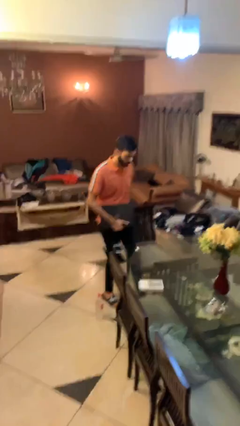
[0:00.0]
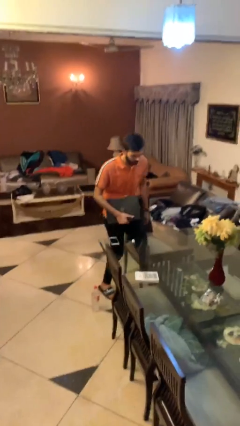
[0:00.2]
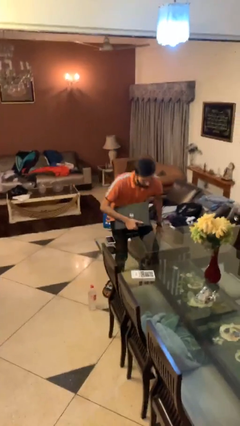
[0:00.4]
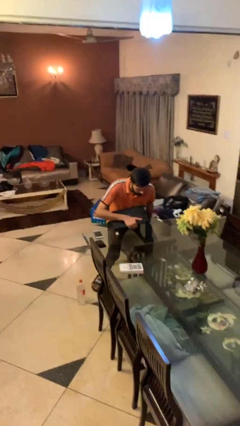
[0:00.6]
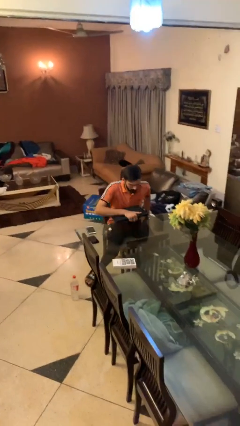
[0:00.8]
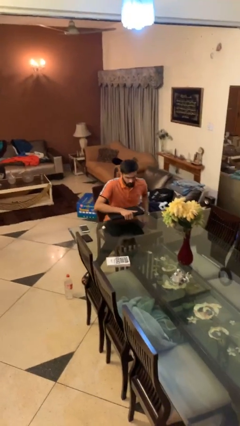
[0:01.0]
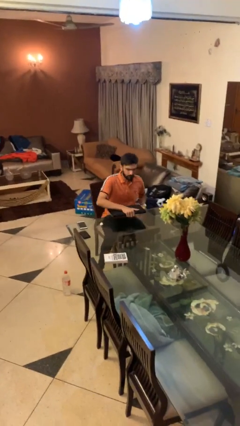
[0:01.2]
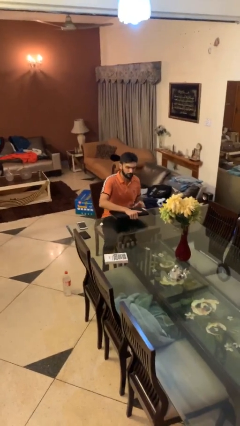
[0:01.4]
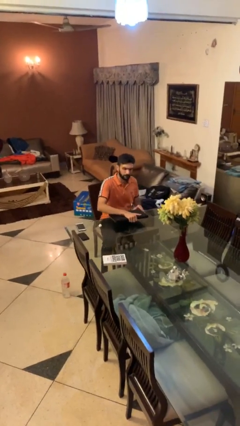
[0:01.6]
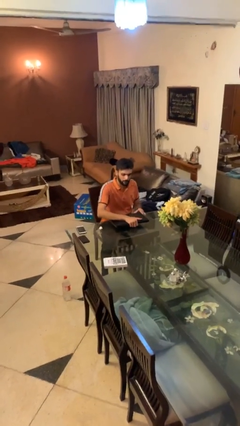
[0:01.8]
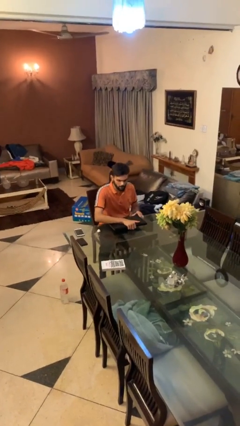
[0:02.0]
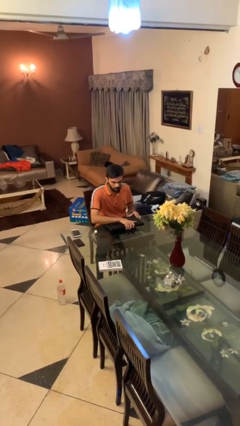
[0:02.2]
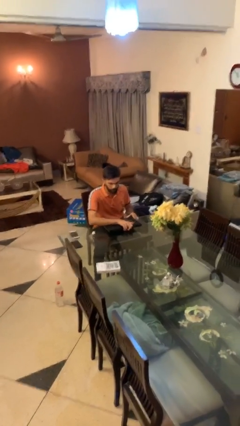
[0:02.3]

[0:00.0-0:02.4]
person sits down

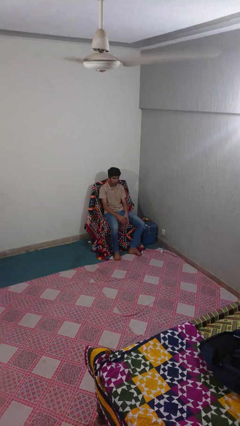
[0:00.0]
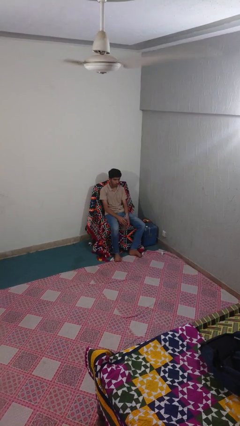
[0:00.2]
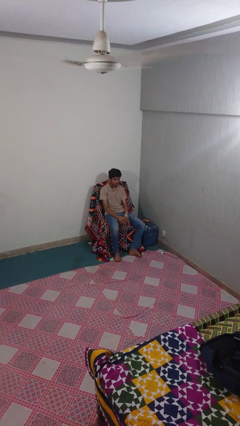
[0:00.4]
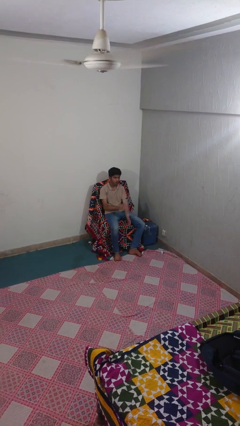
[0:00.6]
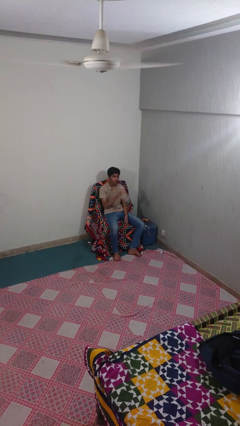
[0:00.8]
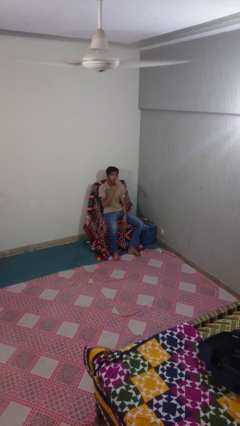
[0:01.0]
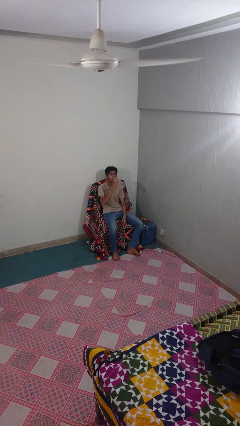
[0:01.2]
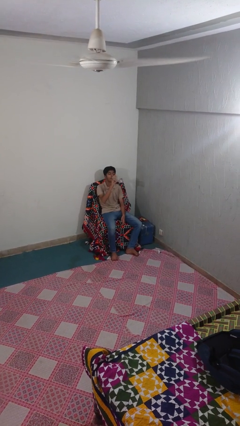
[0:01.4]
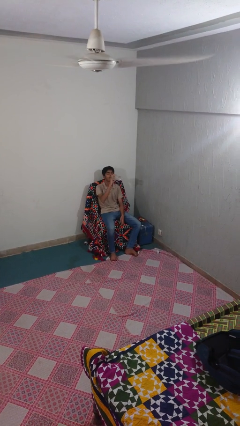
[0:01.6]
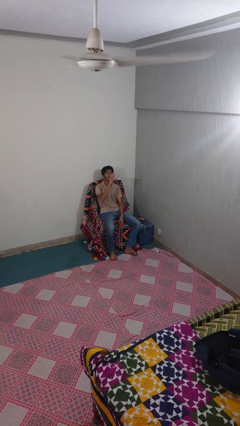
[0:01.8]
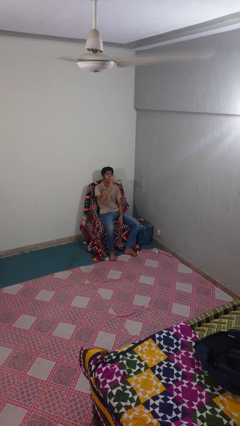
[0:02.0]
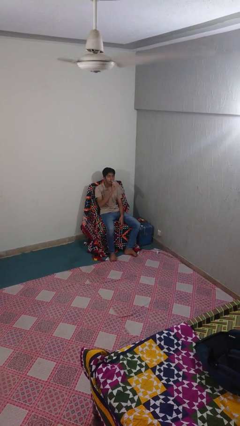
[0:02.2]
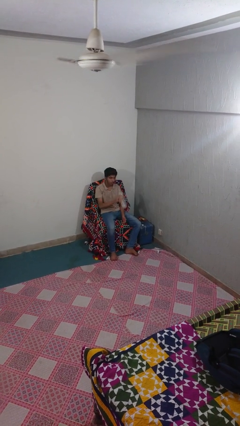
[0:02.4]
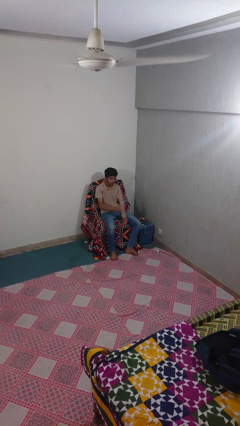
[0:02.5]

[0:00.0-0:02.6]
person drinks from bottle

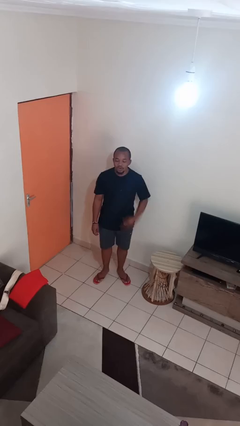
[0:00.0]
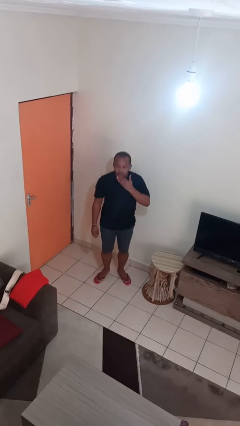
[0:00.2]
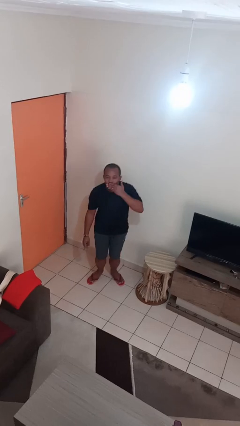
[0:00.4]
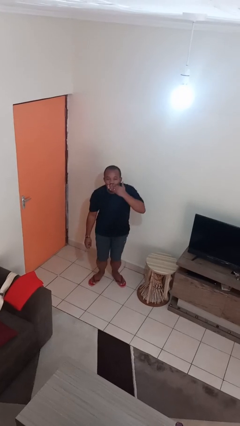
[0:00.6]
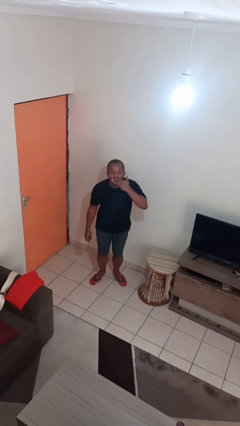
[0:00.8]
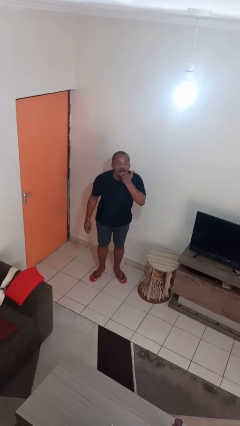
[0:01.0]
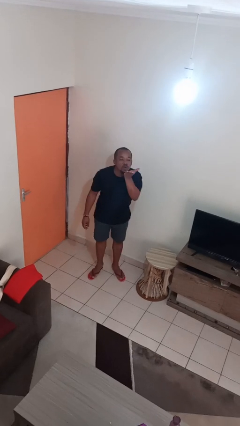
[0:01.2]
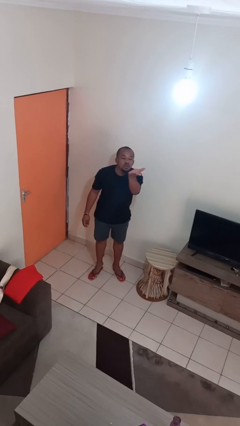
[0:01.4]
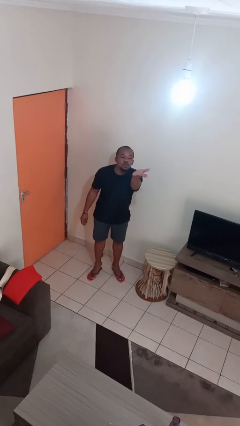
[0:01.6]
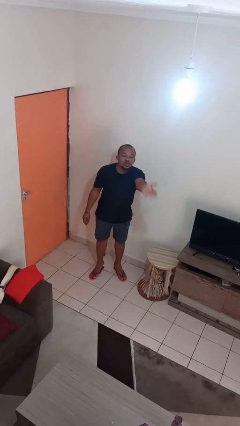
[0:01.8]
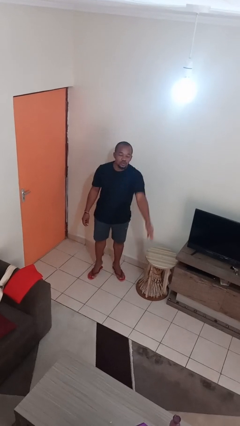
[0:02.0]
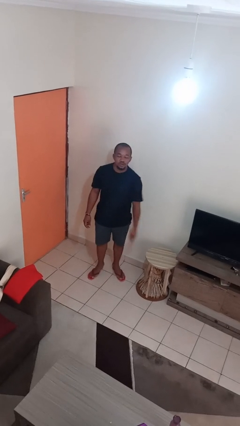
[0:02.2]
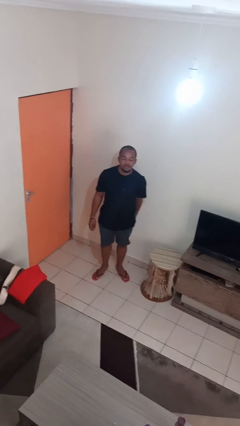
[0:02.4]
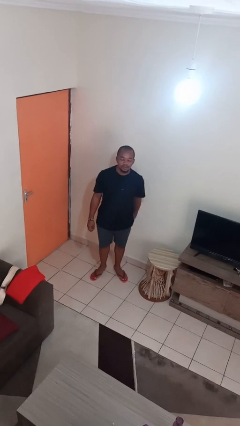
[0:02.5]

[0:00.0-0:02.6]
person gestures blow kiss

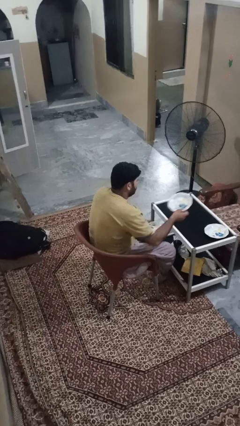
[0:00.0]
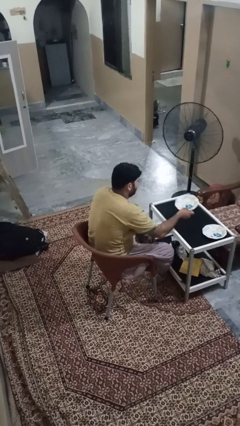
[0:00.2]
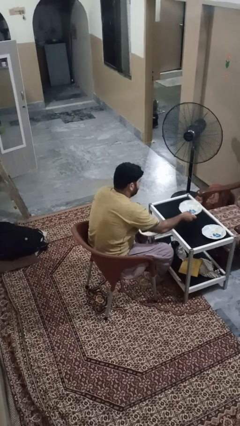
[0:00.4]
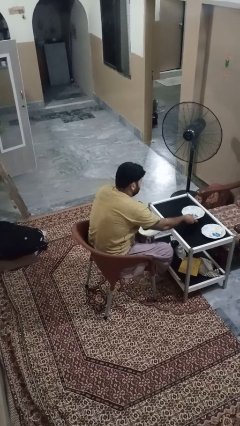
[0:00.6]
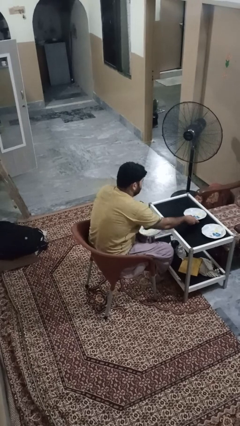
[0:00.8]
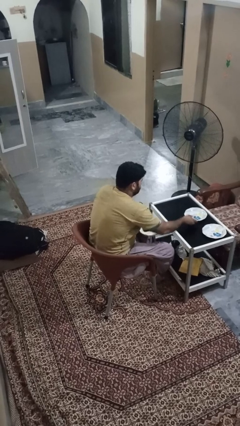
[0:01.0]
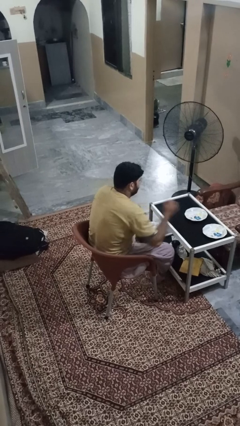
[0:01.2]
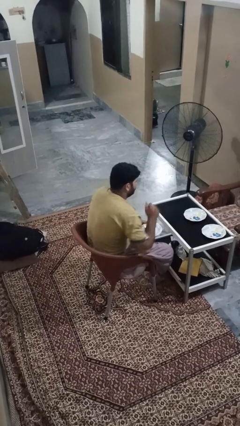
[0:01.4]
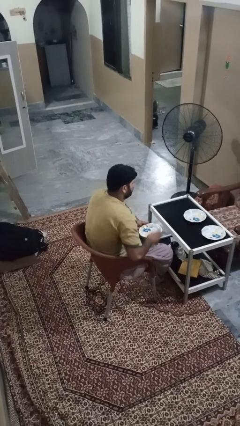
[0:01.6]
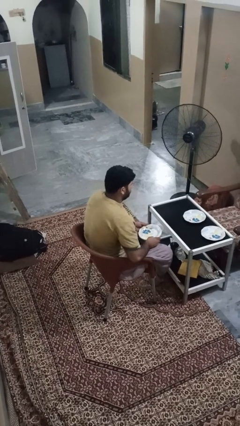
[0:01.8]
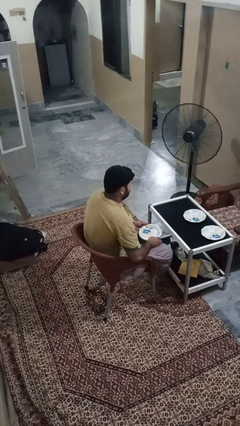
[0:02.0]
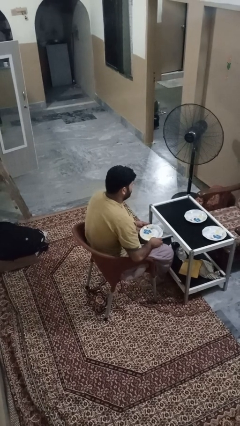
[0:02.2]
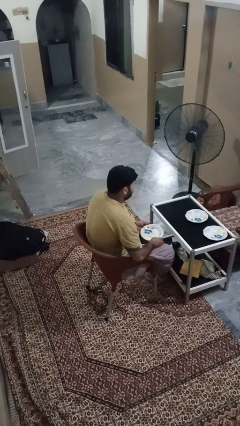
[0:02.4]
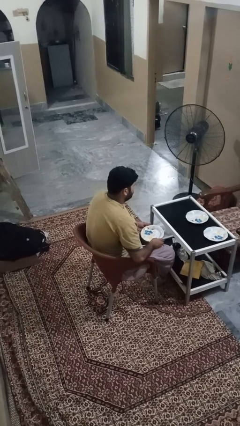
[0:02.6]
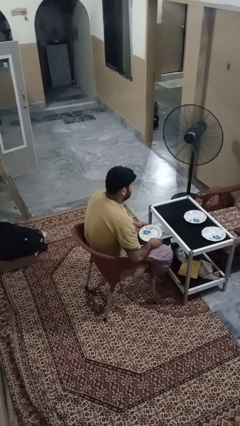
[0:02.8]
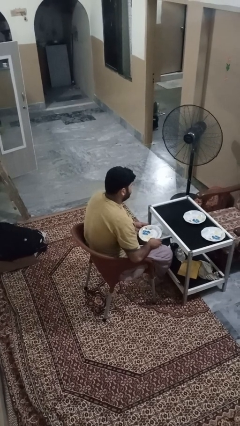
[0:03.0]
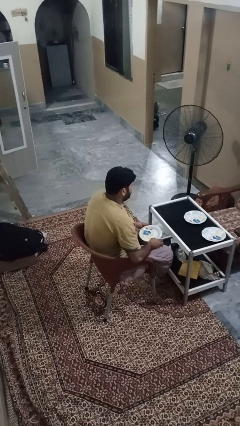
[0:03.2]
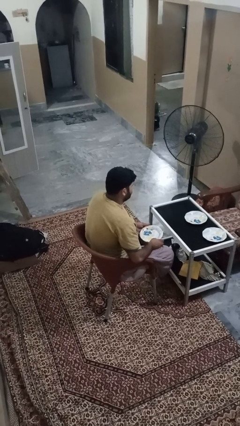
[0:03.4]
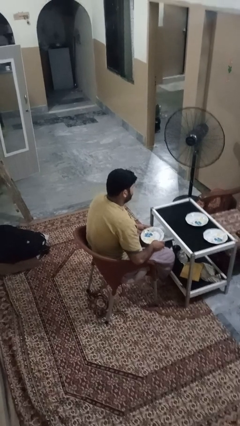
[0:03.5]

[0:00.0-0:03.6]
person sets table

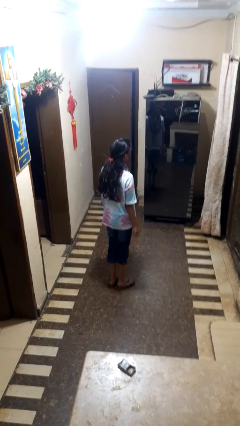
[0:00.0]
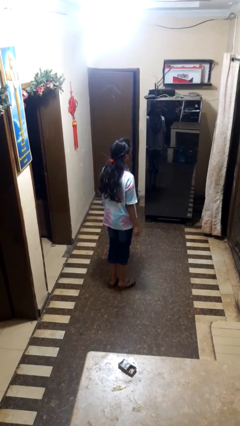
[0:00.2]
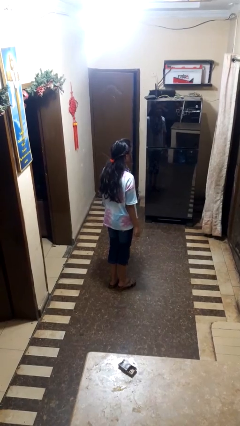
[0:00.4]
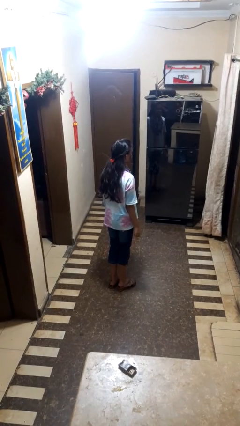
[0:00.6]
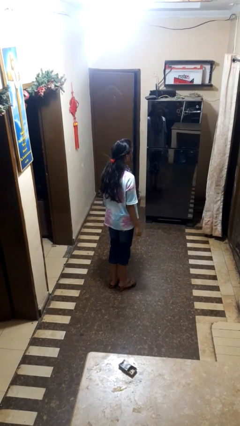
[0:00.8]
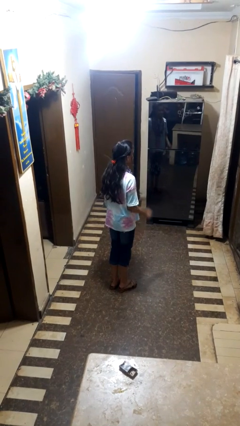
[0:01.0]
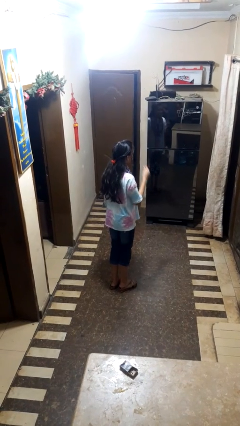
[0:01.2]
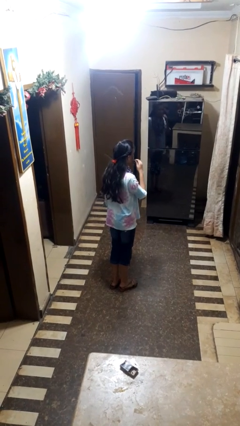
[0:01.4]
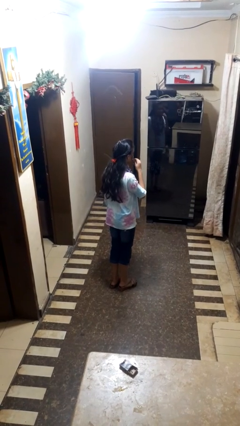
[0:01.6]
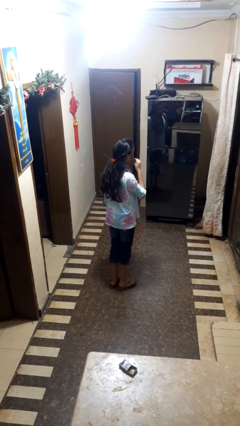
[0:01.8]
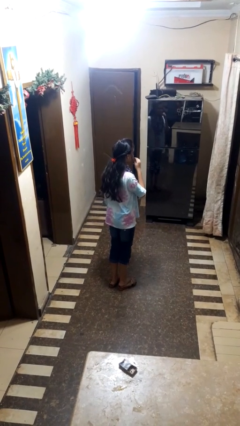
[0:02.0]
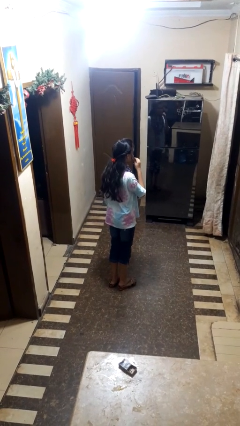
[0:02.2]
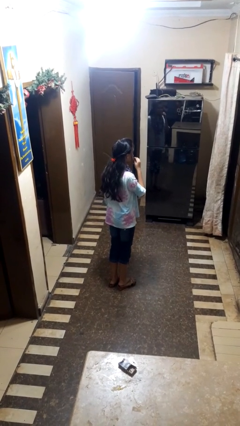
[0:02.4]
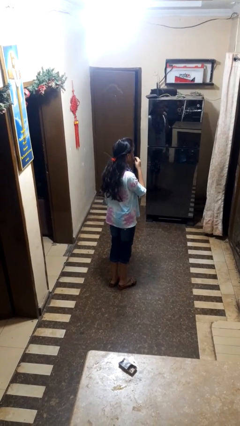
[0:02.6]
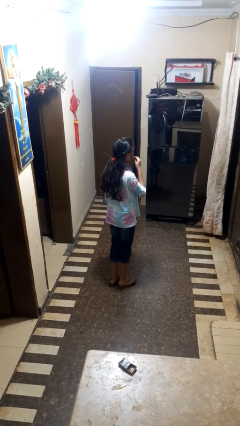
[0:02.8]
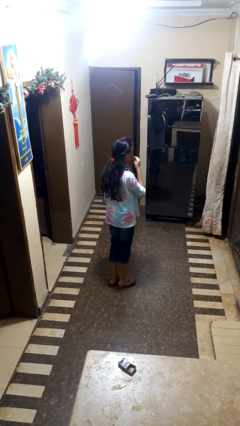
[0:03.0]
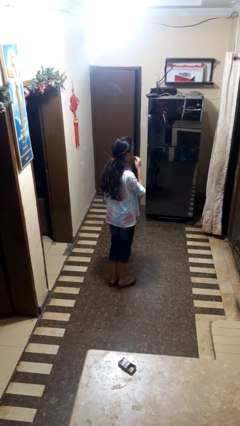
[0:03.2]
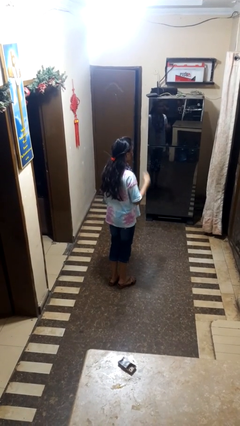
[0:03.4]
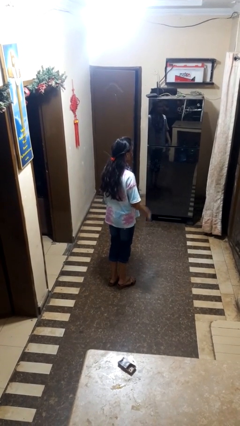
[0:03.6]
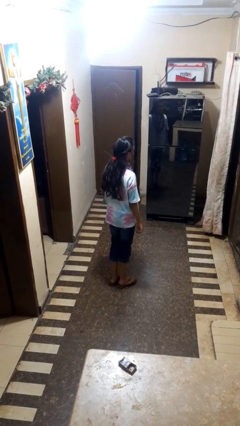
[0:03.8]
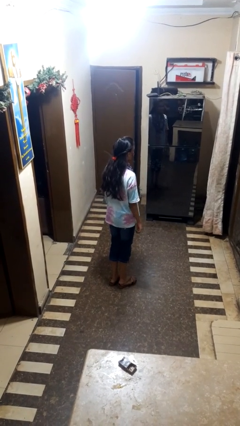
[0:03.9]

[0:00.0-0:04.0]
person flosses

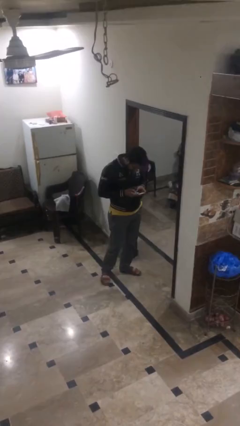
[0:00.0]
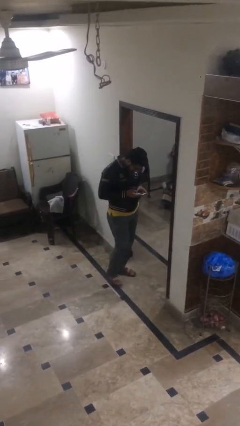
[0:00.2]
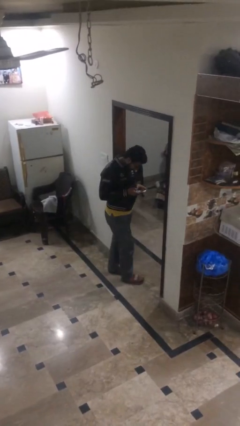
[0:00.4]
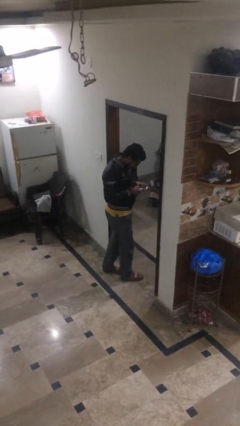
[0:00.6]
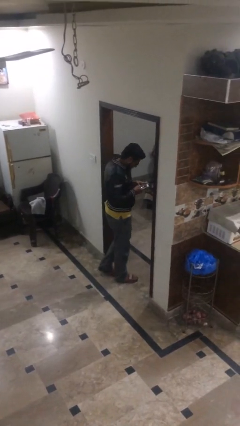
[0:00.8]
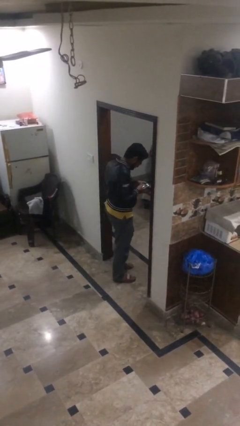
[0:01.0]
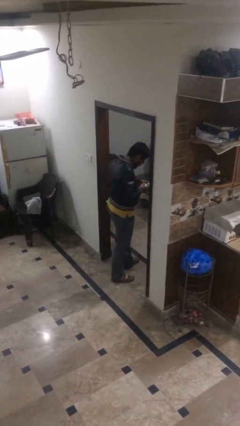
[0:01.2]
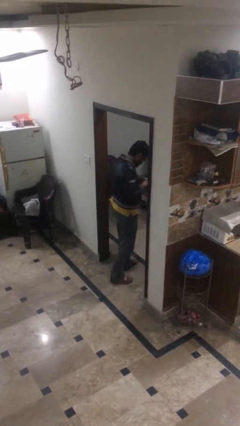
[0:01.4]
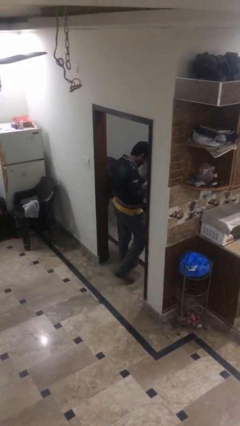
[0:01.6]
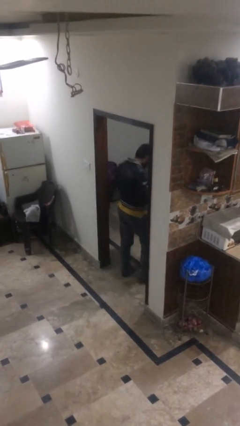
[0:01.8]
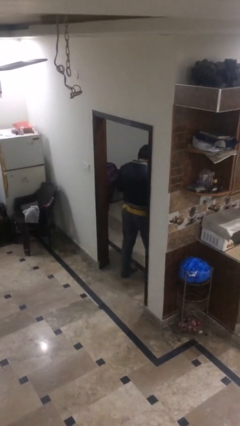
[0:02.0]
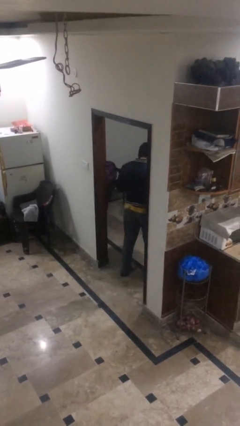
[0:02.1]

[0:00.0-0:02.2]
person enters scene through structure
